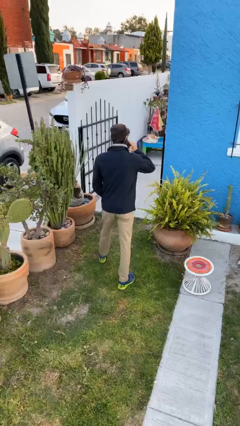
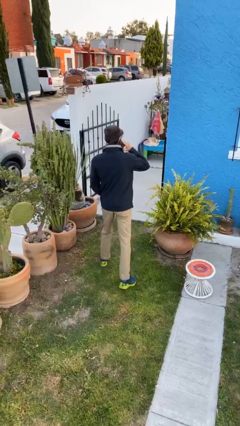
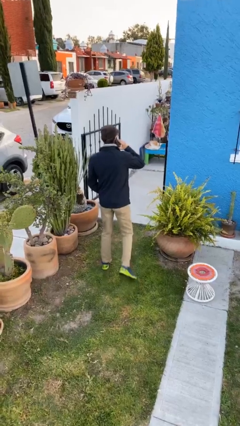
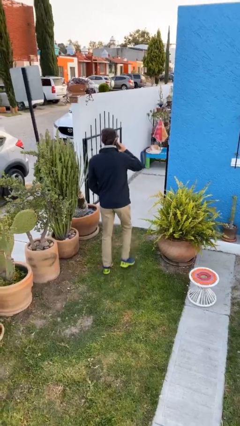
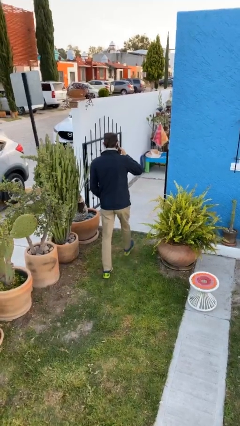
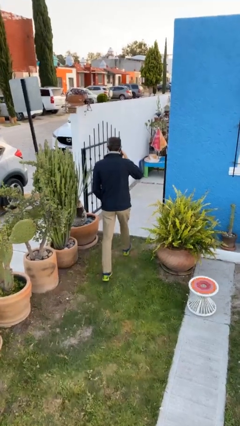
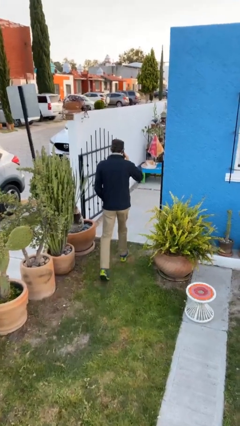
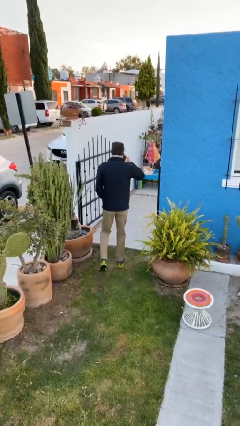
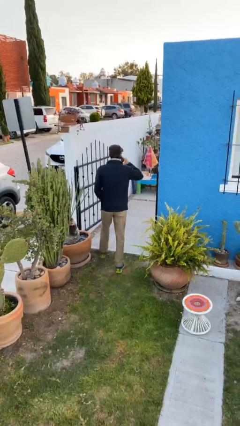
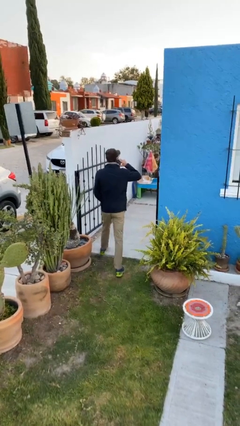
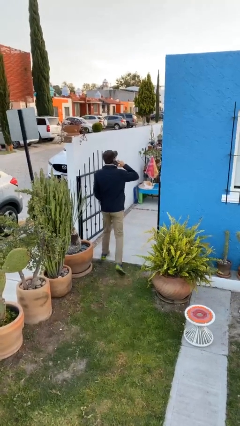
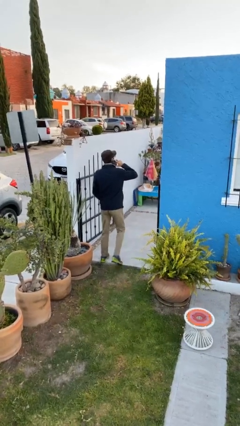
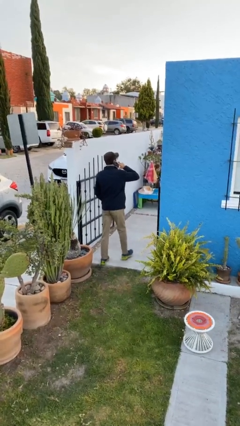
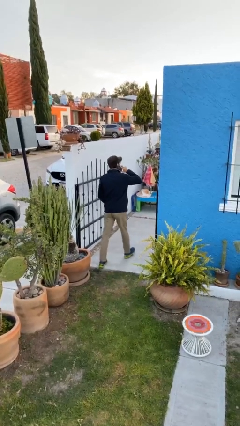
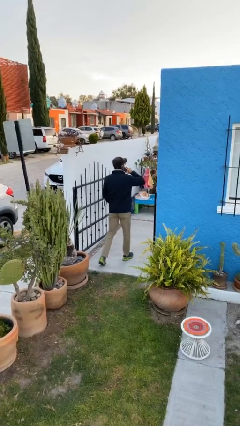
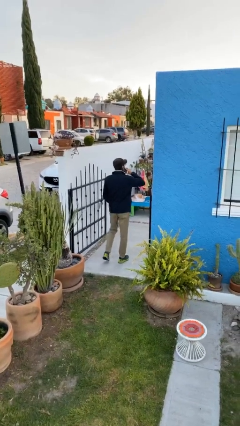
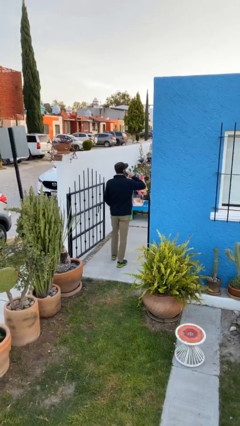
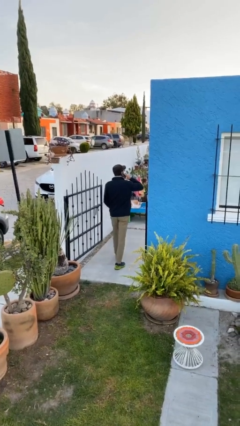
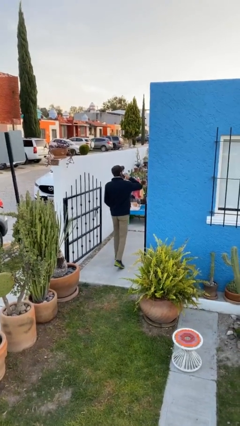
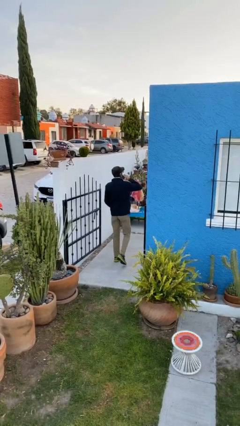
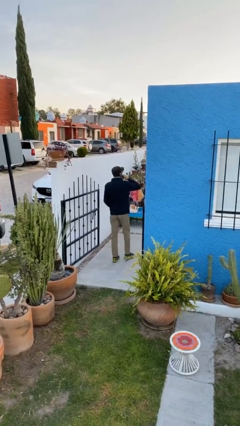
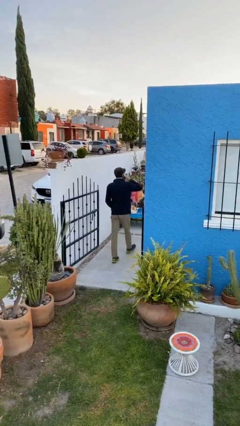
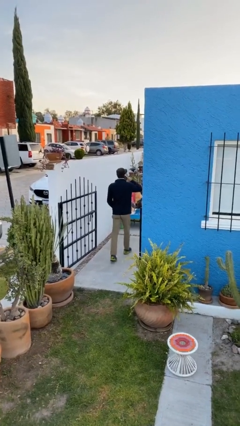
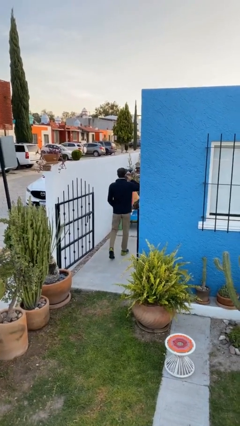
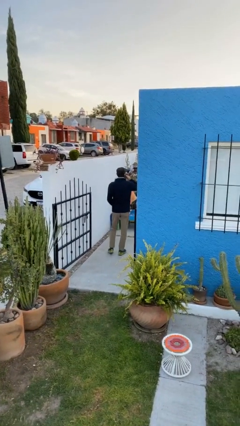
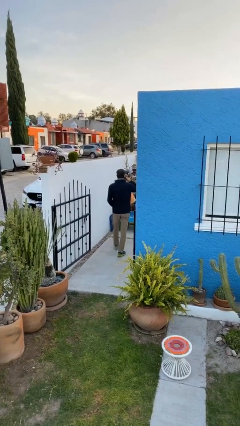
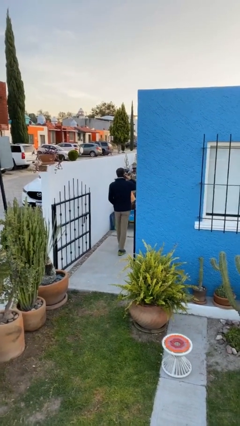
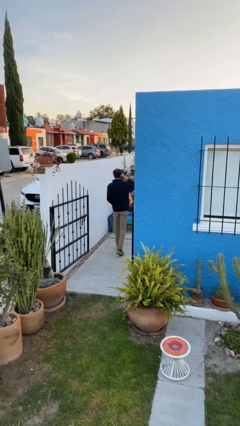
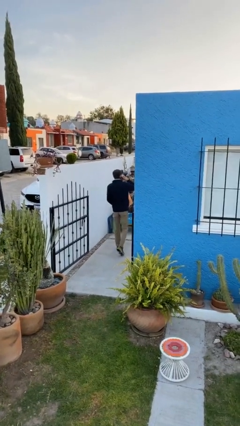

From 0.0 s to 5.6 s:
person exits scene through structure

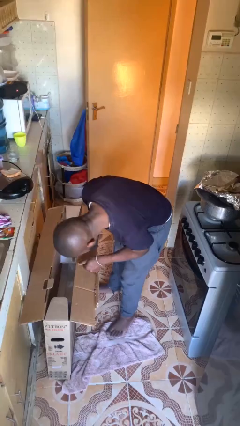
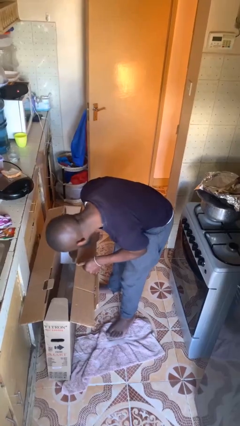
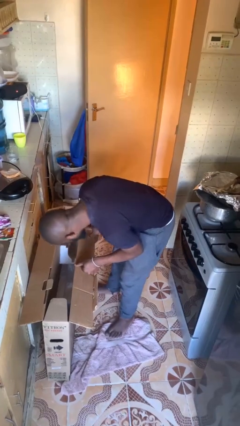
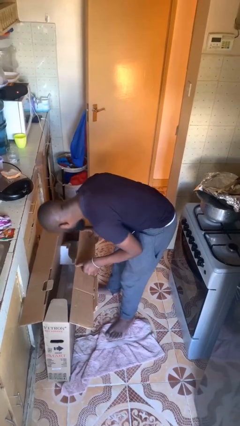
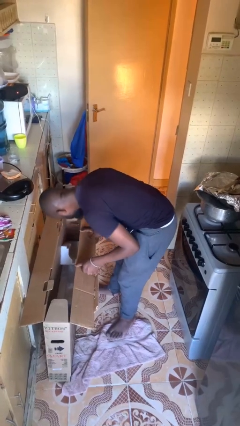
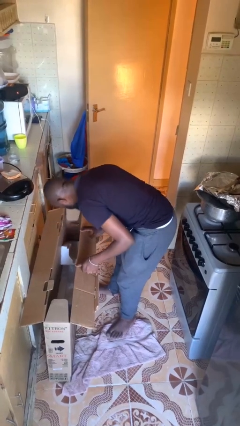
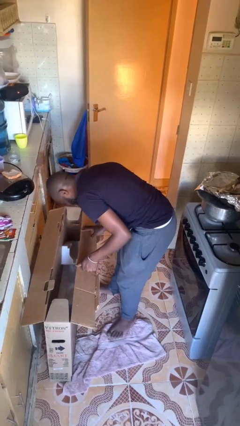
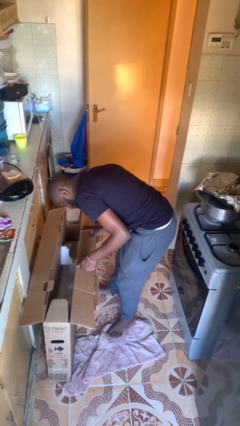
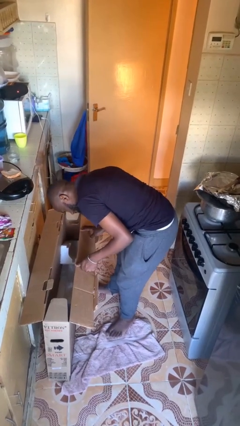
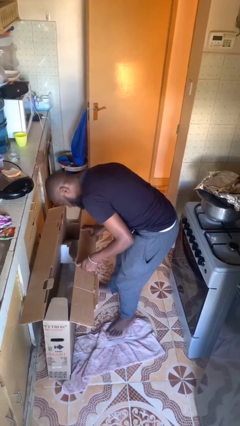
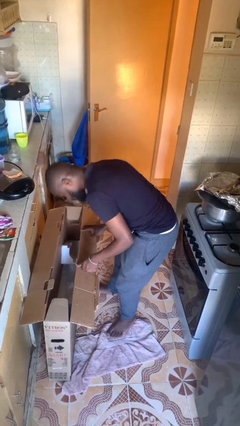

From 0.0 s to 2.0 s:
person searches in box

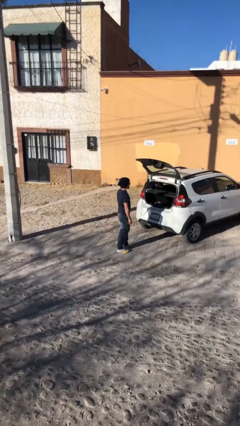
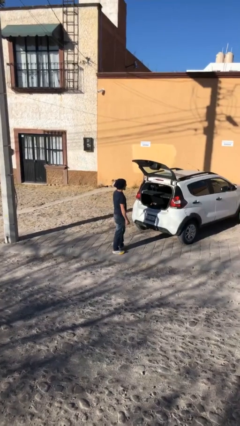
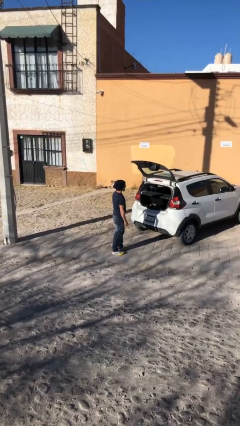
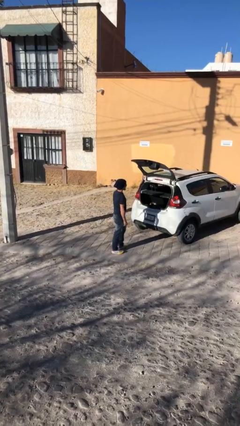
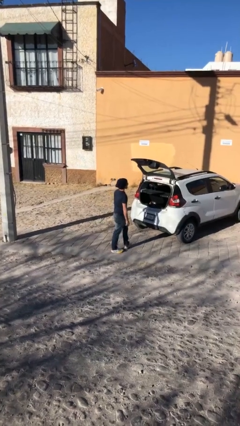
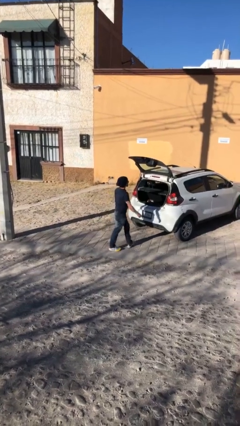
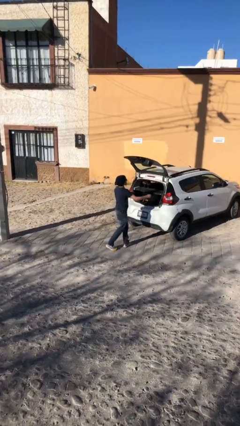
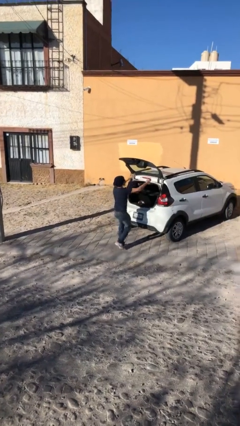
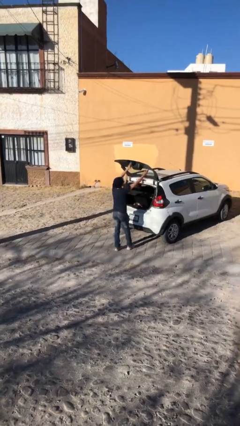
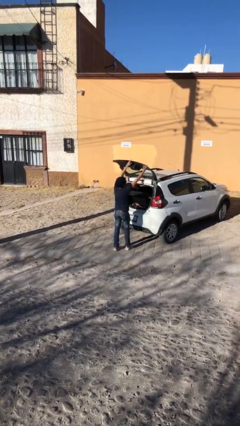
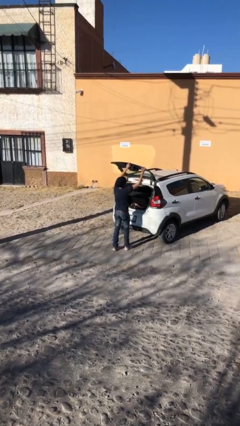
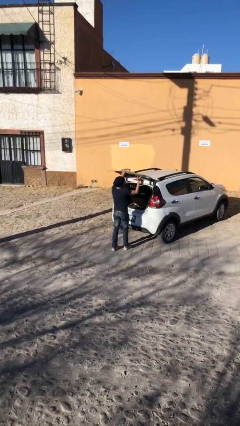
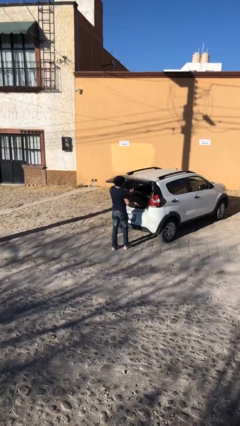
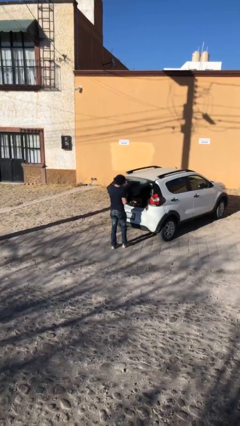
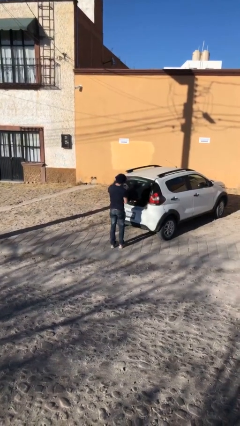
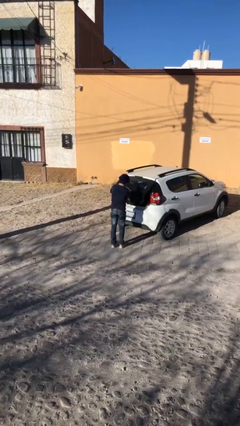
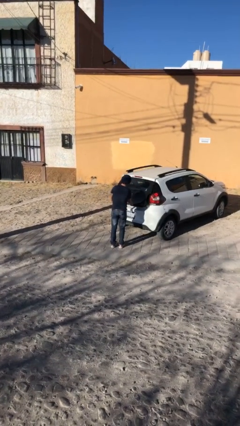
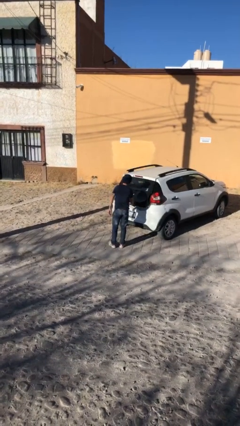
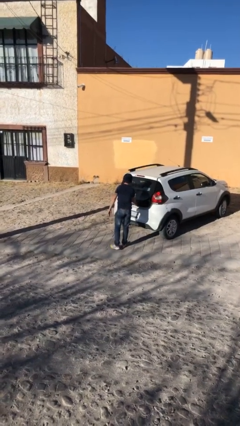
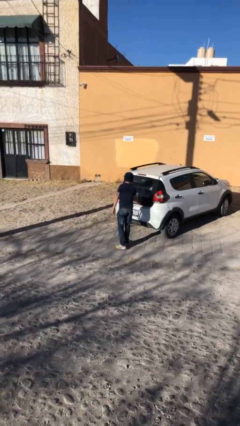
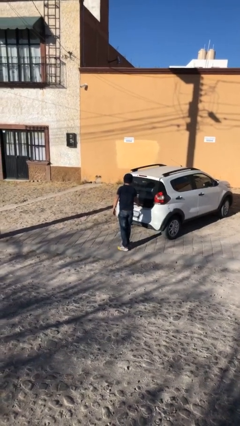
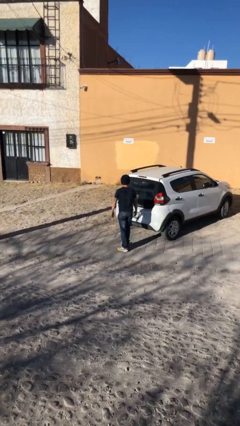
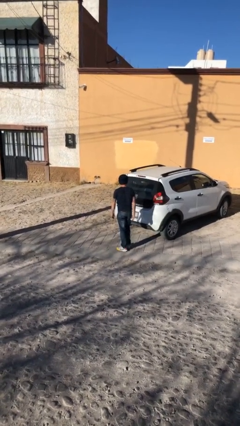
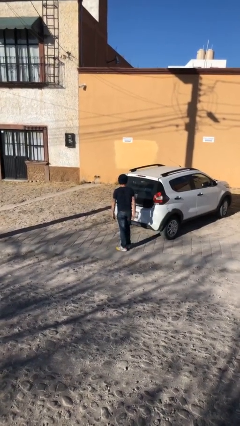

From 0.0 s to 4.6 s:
person closes car trunk

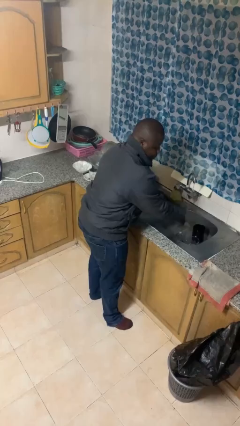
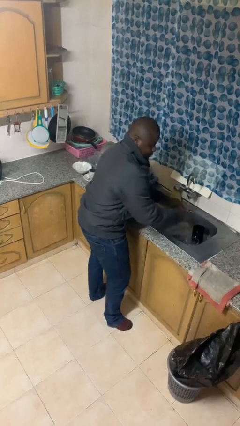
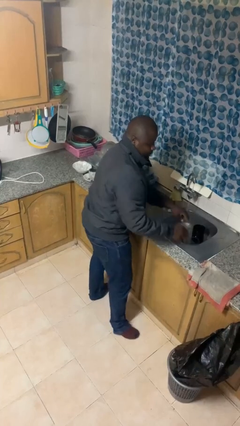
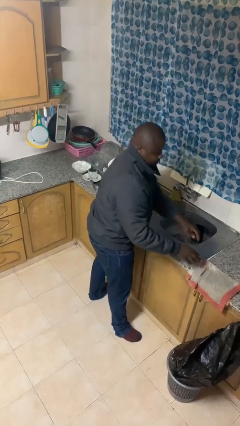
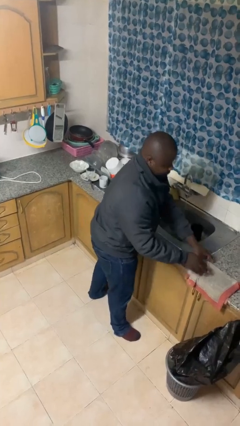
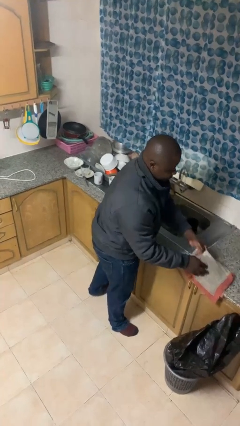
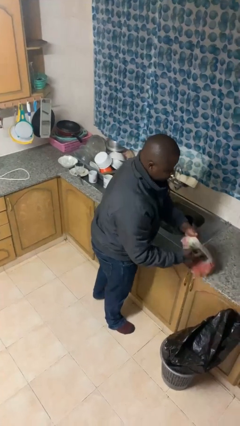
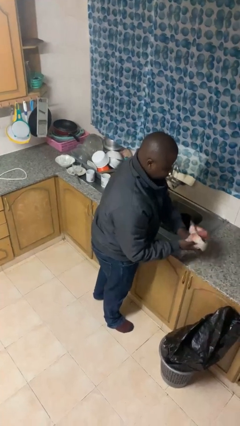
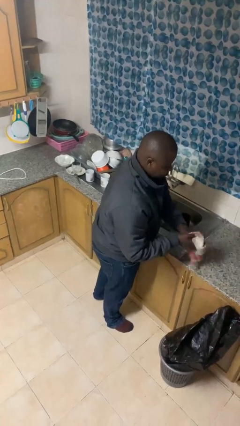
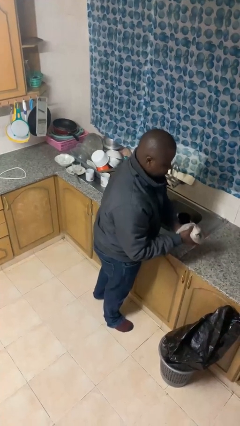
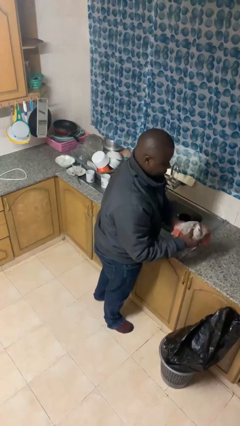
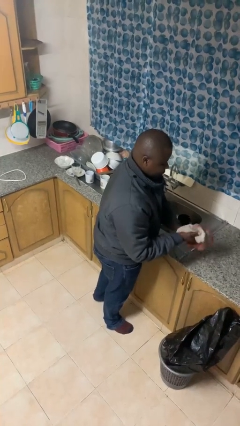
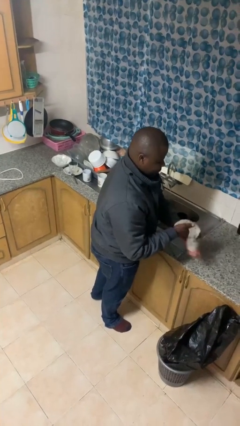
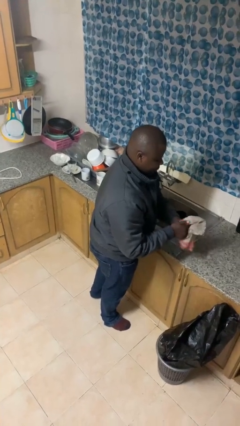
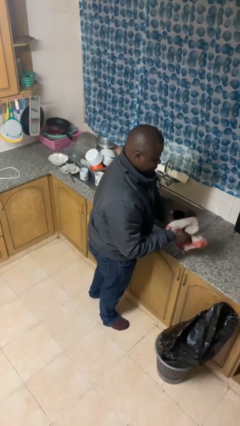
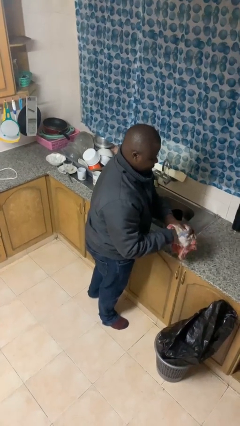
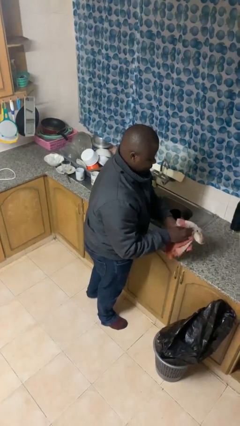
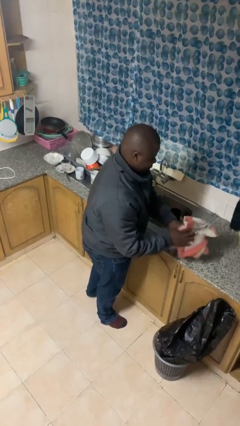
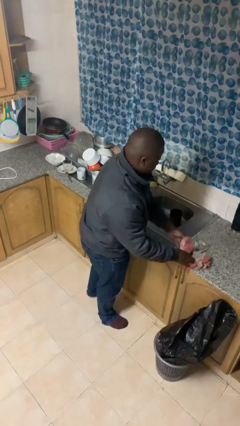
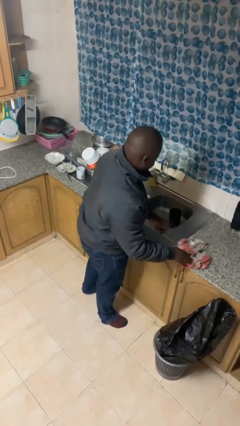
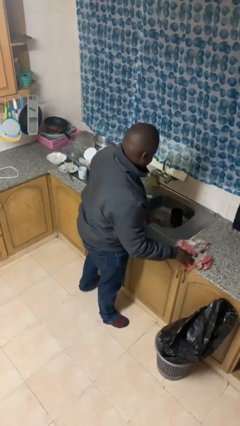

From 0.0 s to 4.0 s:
person dries hands with towel

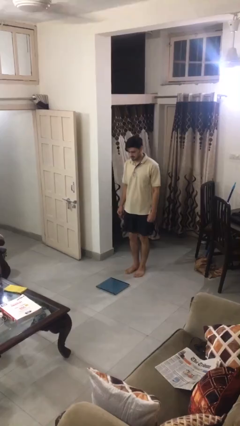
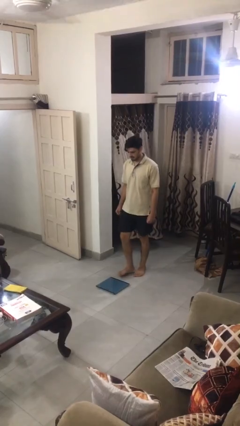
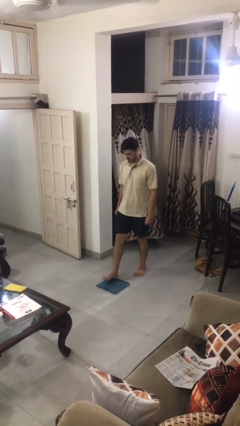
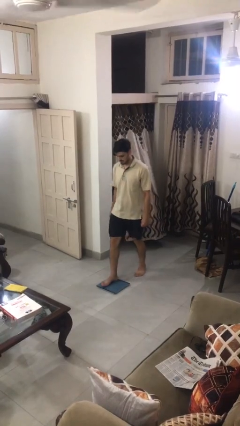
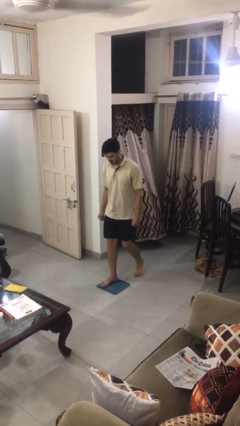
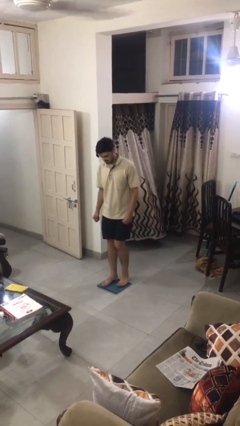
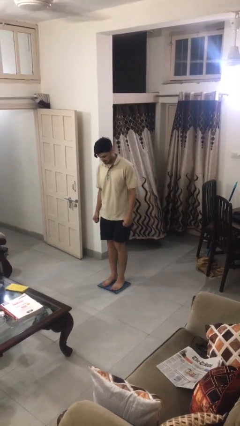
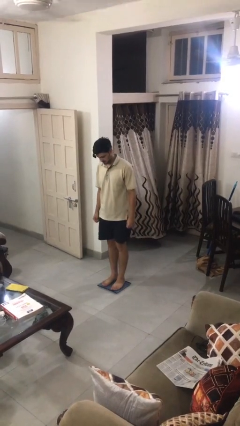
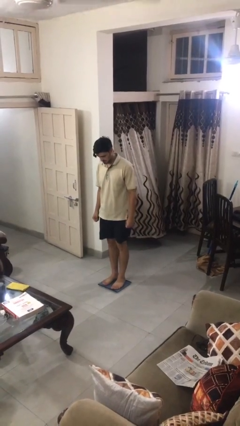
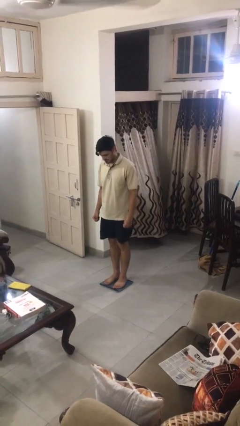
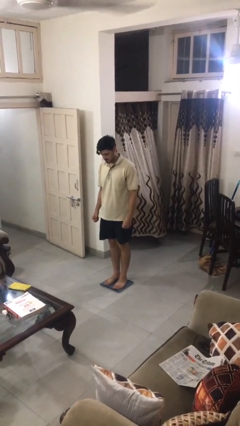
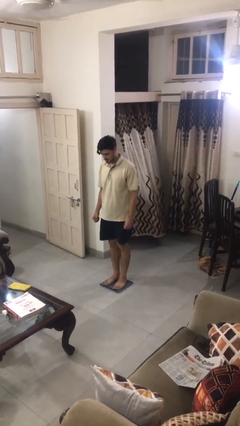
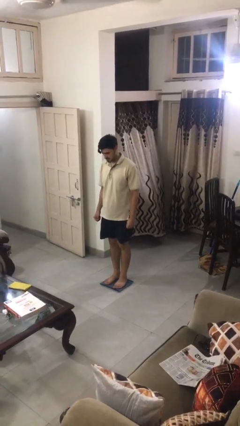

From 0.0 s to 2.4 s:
person uses bodyweight scale
